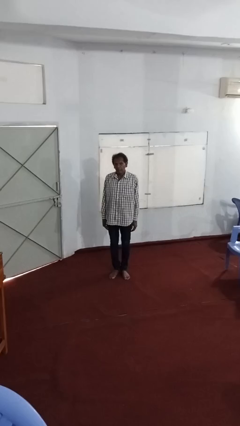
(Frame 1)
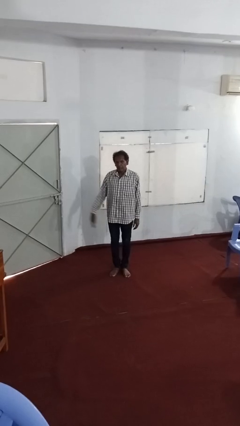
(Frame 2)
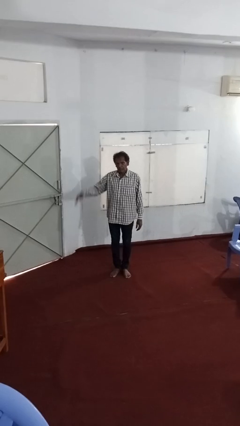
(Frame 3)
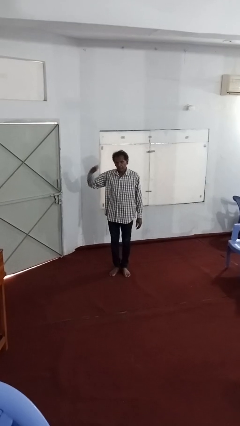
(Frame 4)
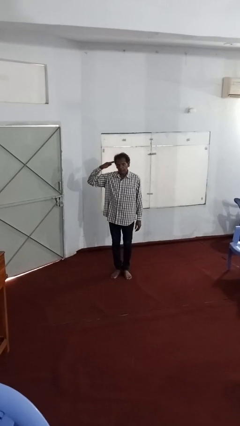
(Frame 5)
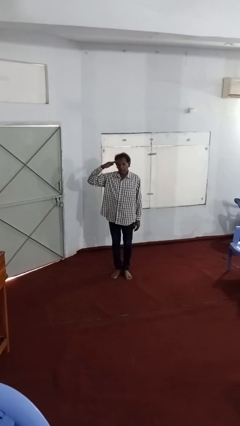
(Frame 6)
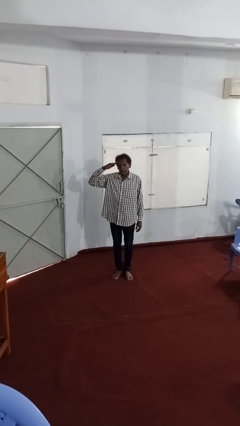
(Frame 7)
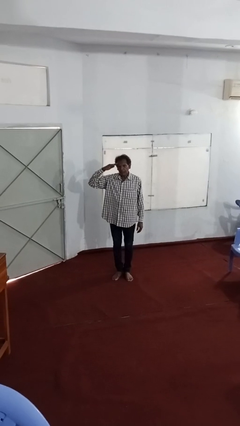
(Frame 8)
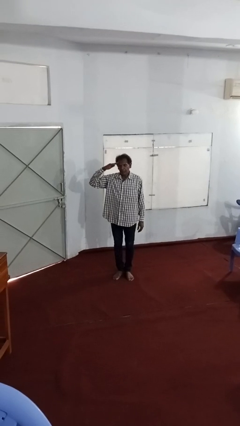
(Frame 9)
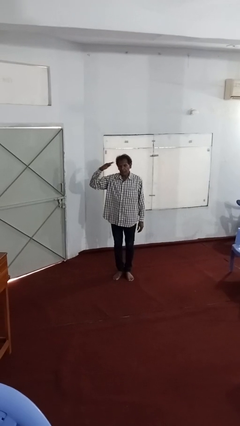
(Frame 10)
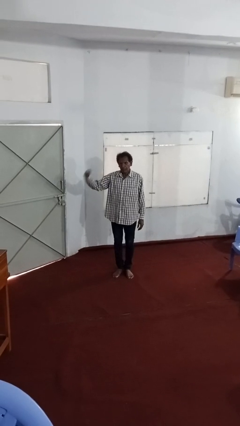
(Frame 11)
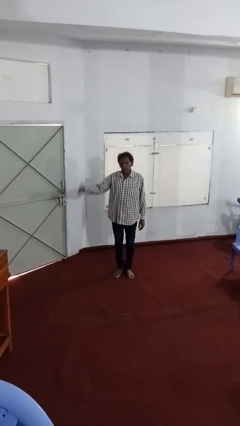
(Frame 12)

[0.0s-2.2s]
person salutes

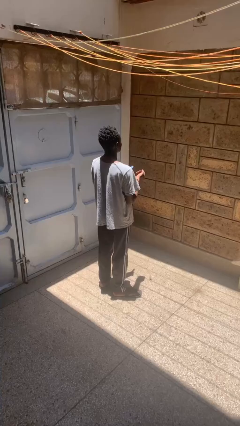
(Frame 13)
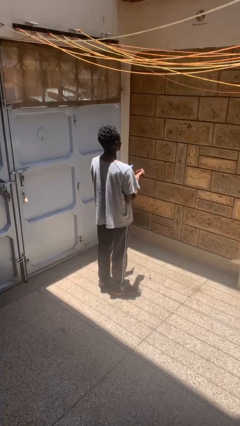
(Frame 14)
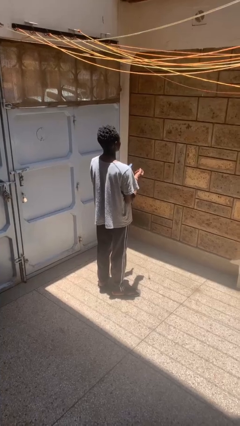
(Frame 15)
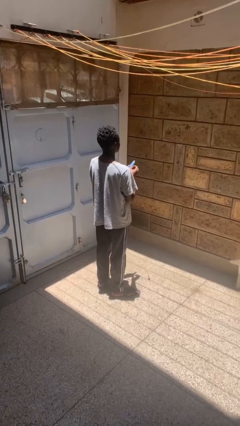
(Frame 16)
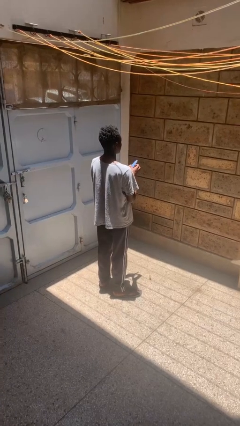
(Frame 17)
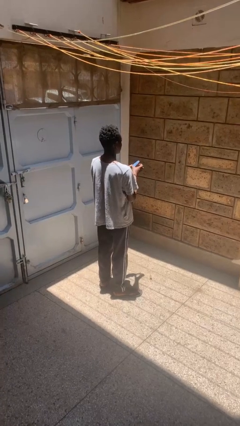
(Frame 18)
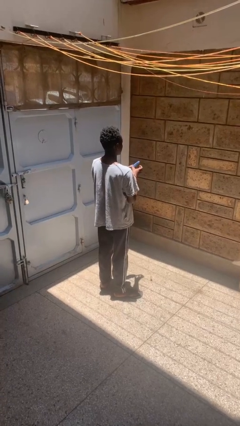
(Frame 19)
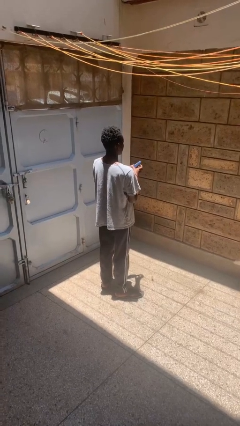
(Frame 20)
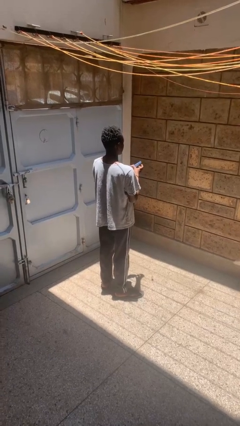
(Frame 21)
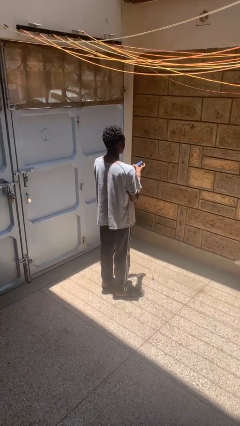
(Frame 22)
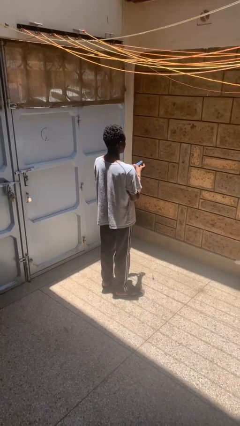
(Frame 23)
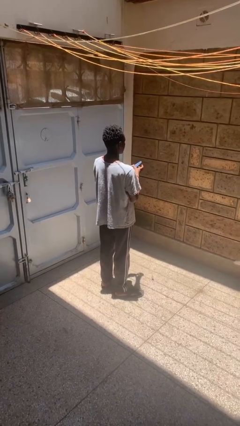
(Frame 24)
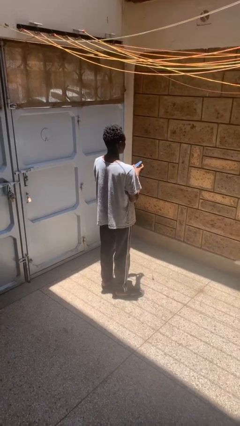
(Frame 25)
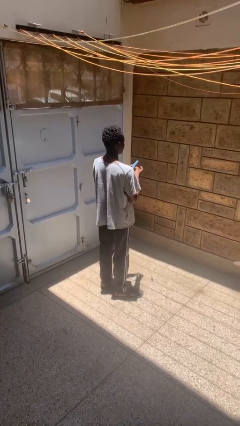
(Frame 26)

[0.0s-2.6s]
person files fingernails

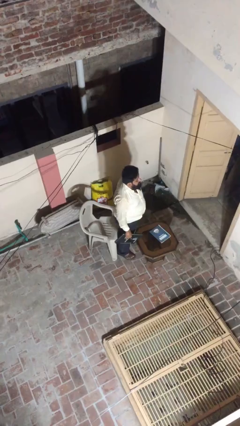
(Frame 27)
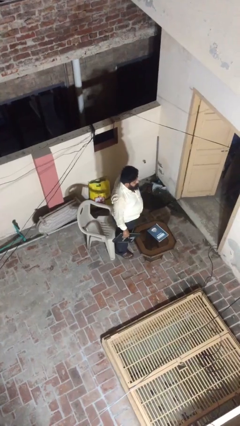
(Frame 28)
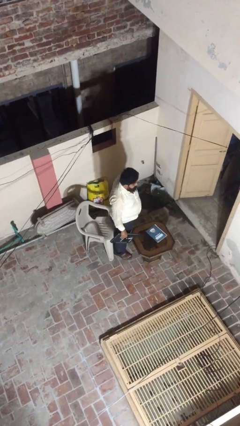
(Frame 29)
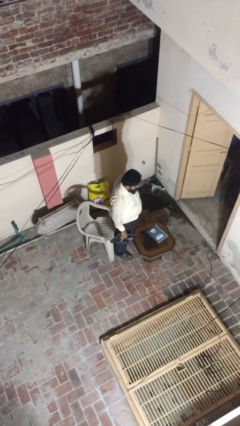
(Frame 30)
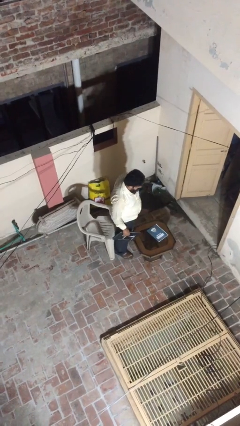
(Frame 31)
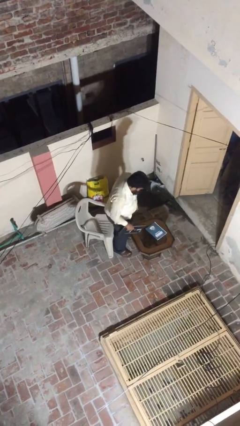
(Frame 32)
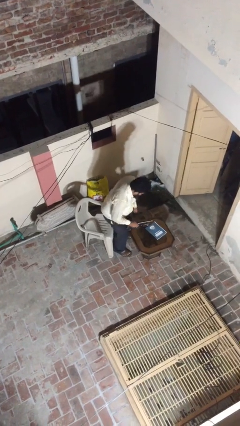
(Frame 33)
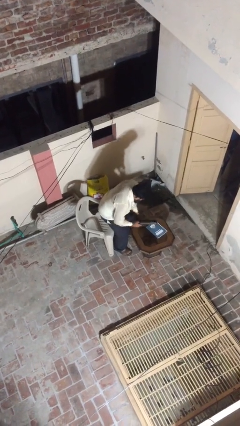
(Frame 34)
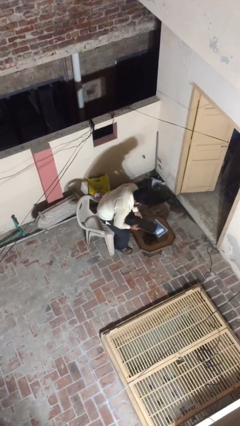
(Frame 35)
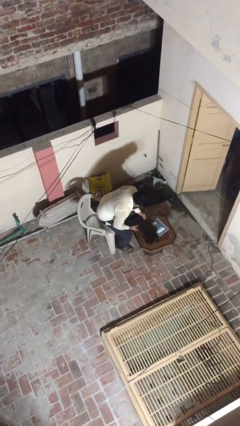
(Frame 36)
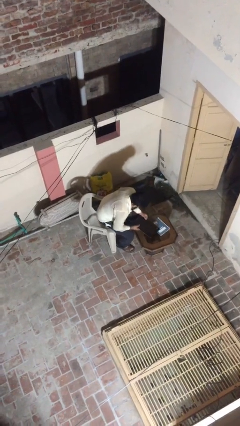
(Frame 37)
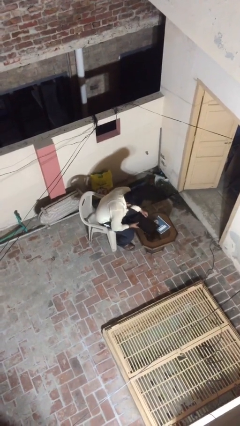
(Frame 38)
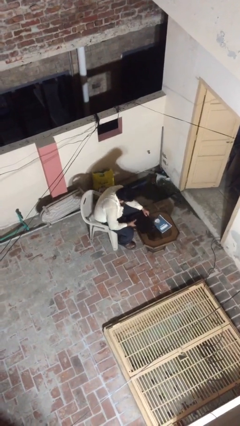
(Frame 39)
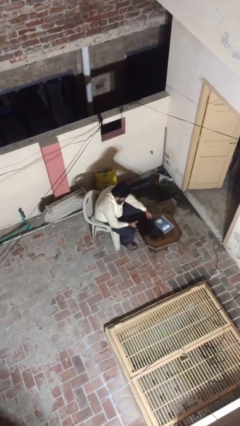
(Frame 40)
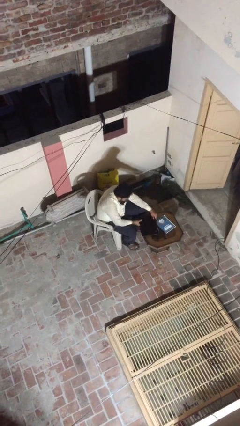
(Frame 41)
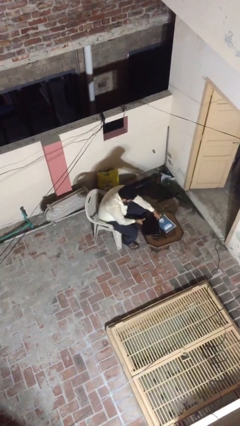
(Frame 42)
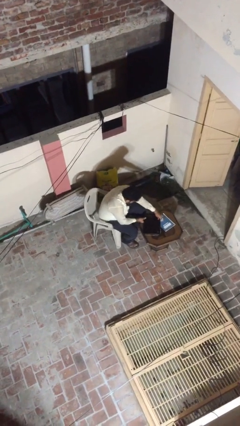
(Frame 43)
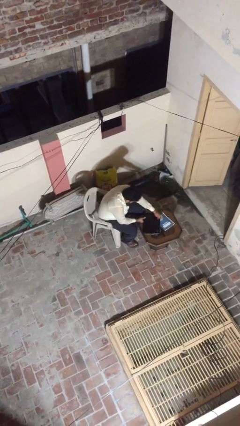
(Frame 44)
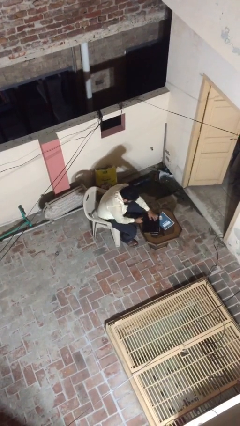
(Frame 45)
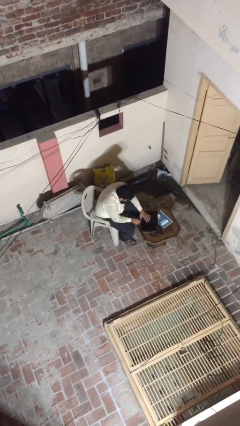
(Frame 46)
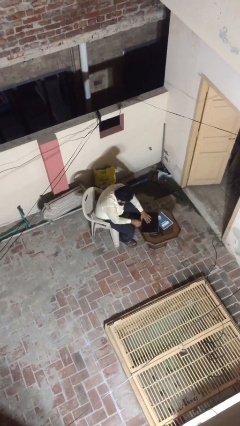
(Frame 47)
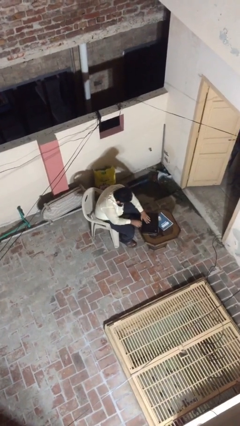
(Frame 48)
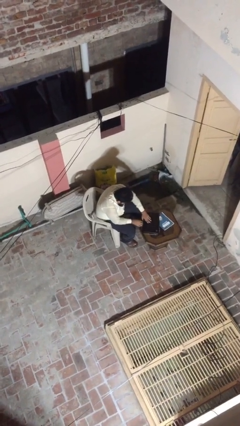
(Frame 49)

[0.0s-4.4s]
person sits down

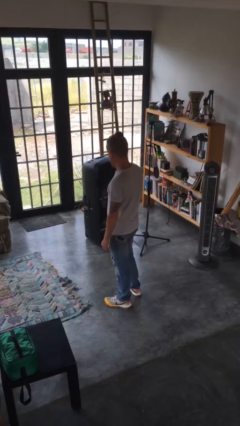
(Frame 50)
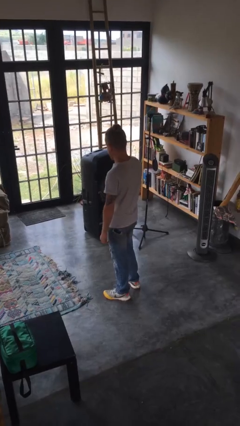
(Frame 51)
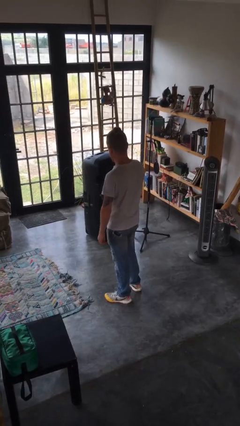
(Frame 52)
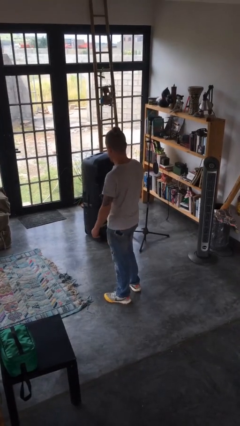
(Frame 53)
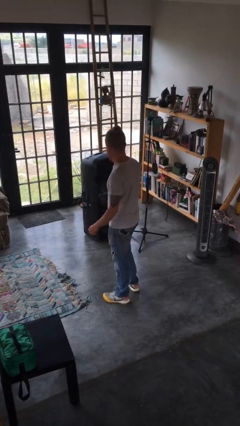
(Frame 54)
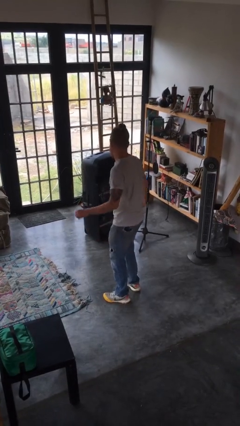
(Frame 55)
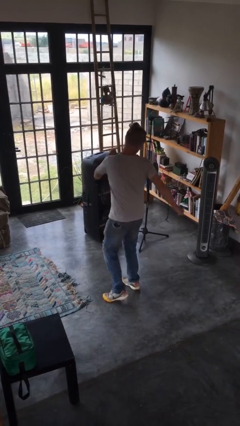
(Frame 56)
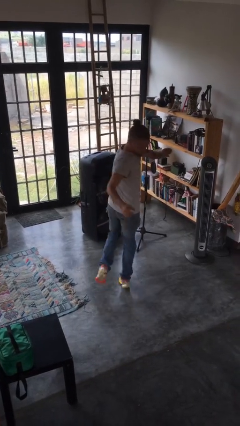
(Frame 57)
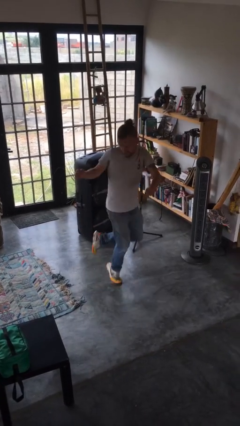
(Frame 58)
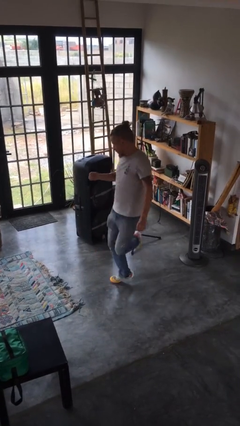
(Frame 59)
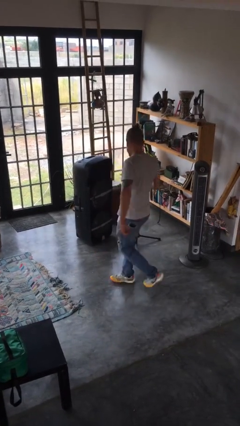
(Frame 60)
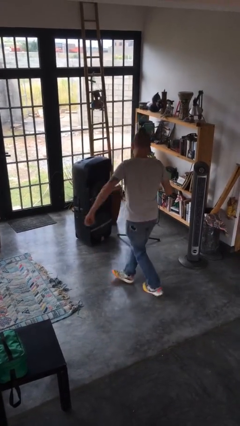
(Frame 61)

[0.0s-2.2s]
person twirls

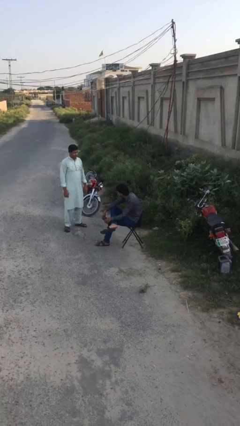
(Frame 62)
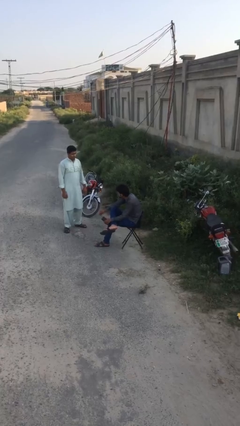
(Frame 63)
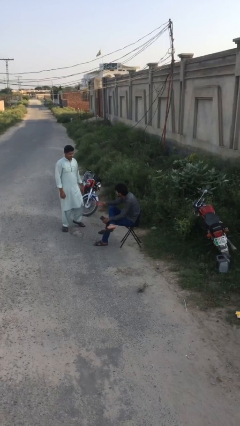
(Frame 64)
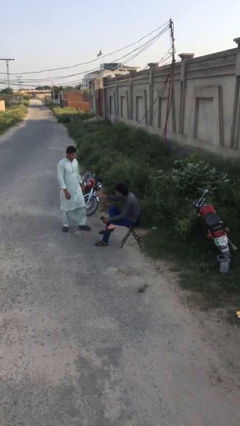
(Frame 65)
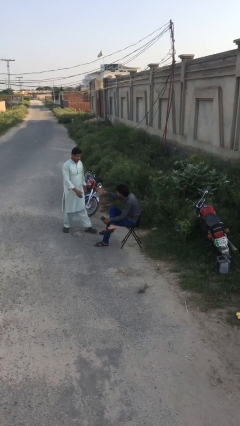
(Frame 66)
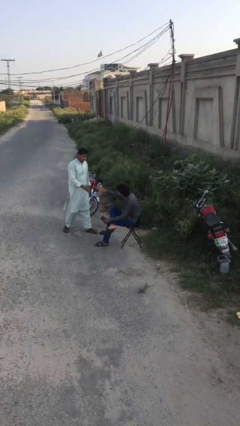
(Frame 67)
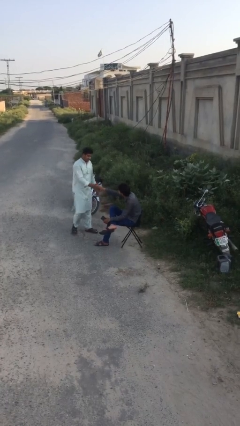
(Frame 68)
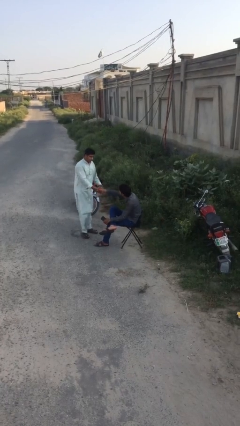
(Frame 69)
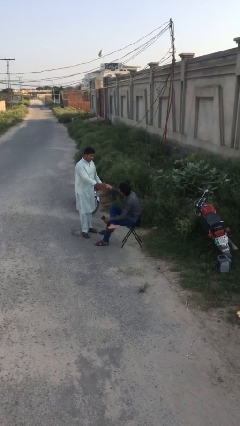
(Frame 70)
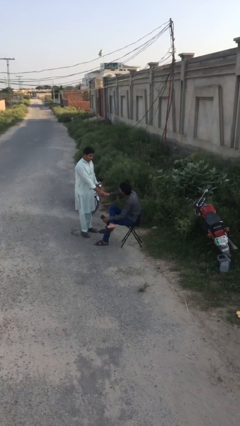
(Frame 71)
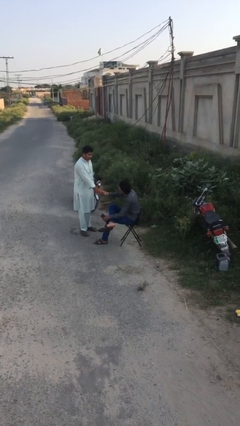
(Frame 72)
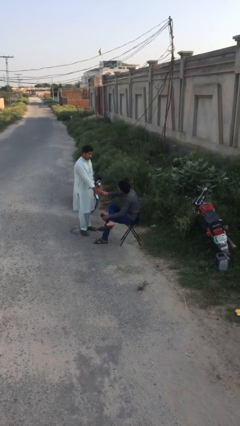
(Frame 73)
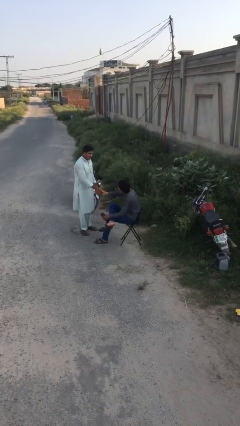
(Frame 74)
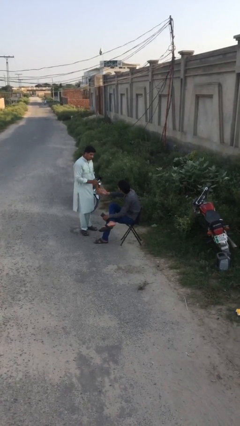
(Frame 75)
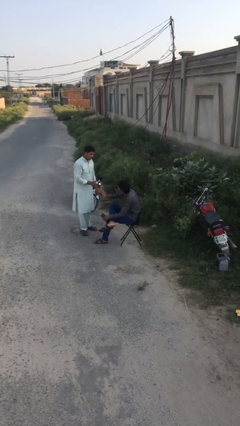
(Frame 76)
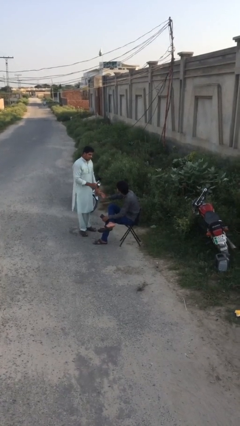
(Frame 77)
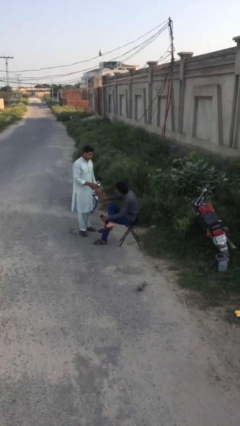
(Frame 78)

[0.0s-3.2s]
person shakes hand

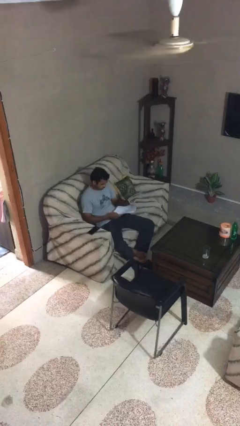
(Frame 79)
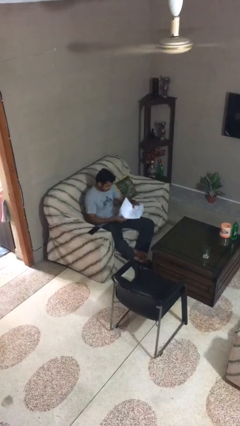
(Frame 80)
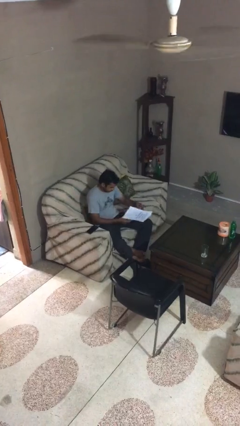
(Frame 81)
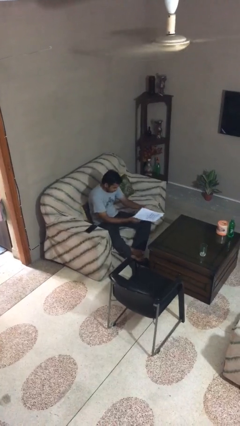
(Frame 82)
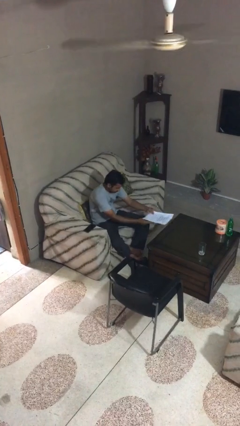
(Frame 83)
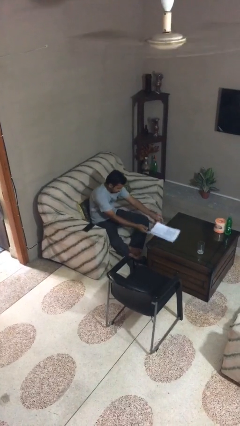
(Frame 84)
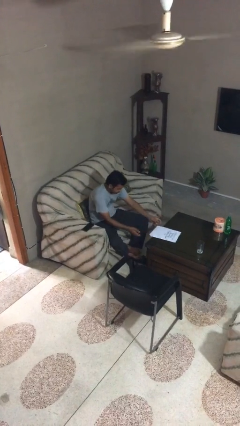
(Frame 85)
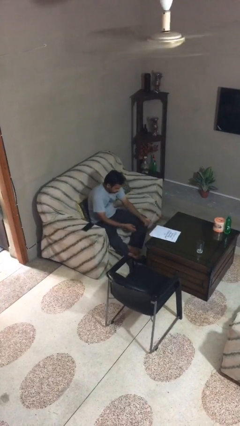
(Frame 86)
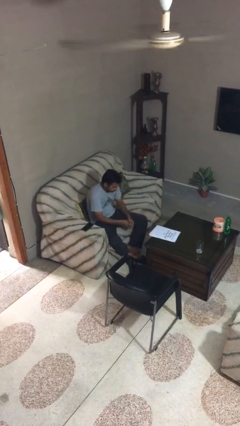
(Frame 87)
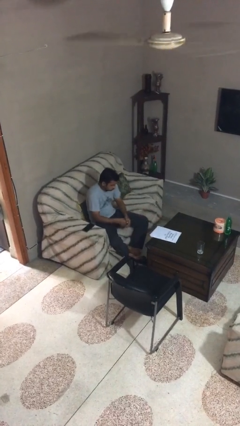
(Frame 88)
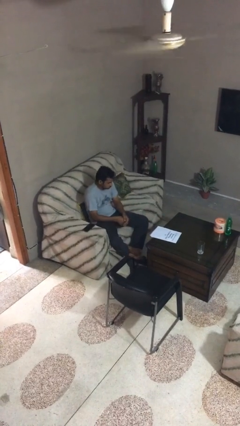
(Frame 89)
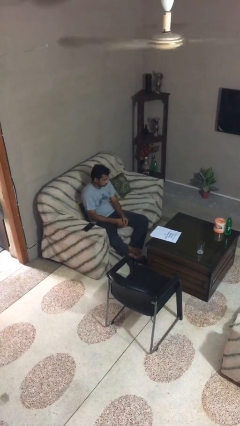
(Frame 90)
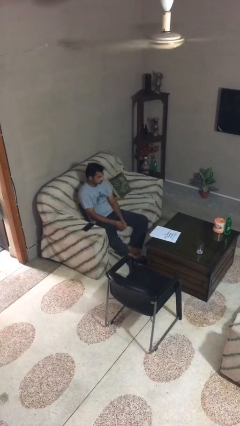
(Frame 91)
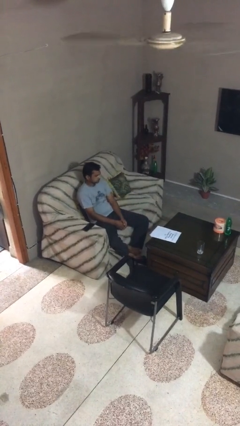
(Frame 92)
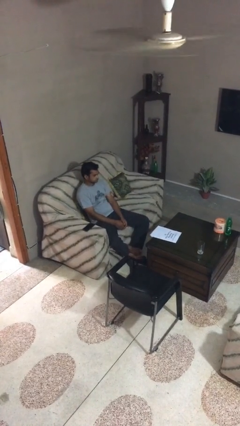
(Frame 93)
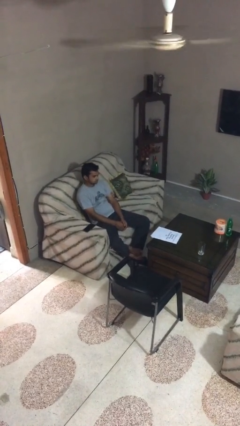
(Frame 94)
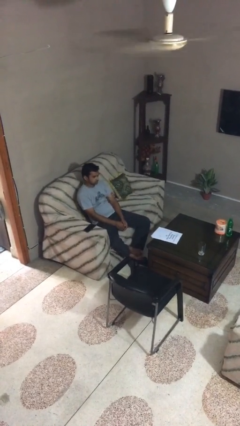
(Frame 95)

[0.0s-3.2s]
person puts down object on table
